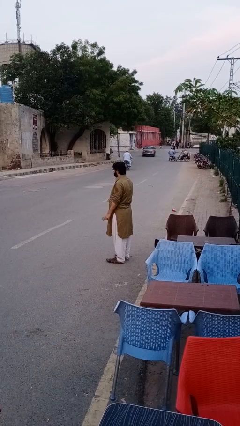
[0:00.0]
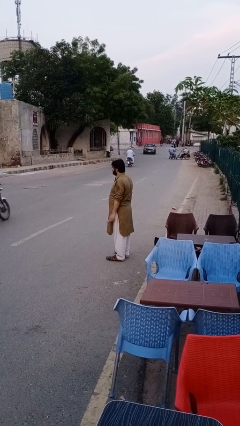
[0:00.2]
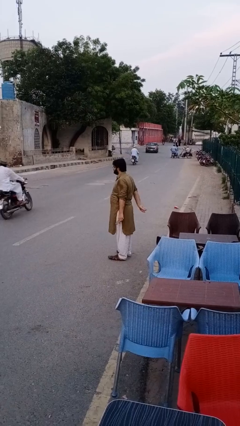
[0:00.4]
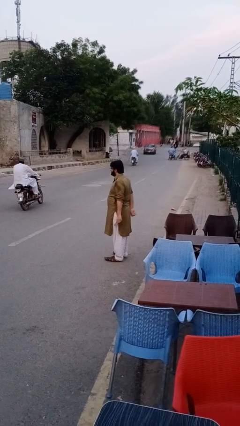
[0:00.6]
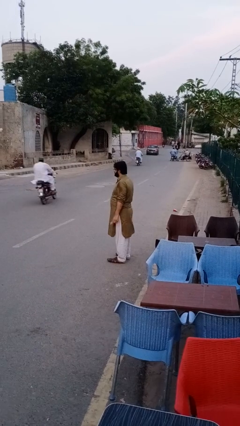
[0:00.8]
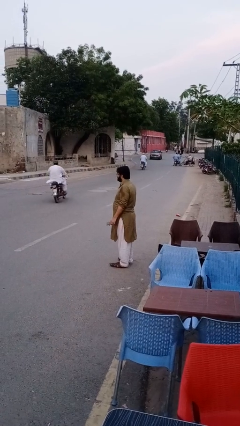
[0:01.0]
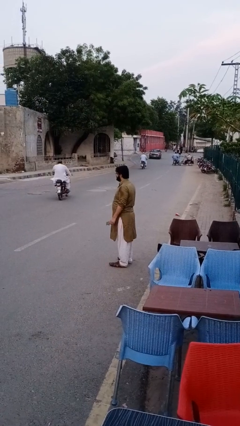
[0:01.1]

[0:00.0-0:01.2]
person puts phone into pocket

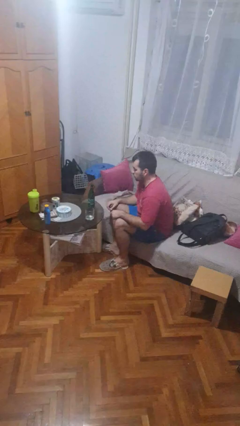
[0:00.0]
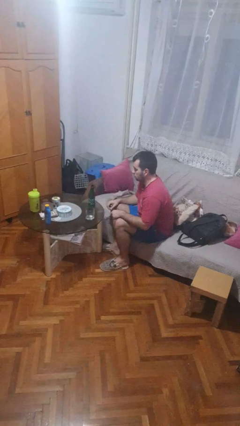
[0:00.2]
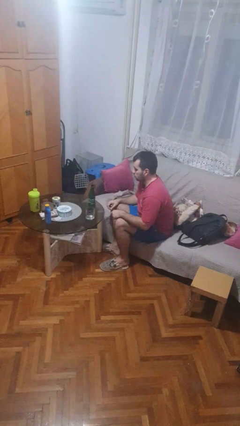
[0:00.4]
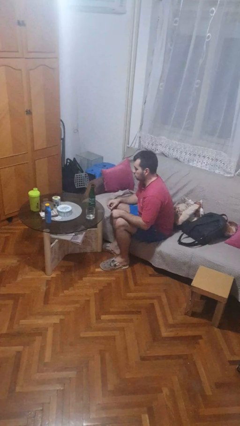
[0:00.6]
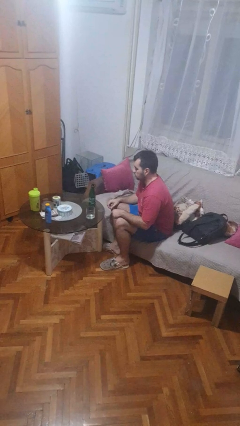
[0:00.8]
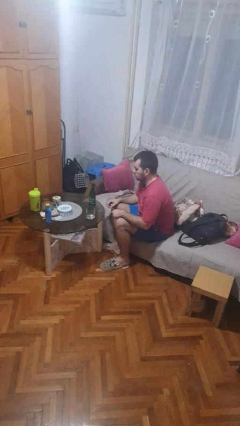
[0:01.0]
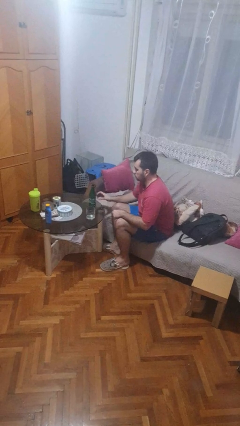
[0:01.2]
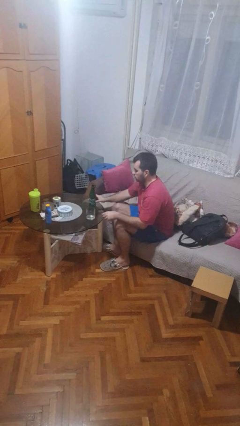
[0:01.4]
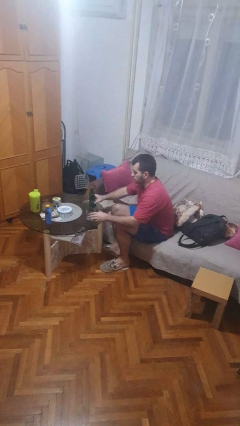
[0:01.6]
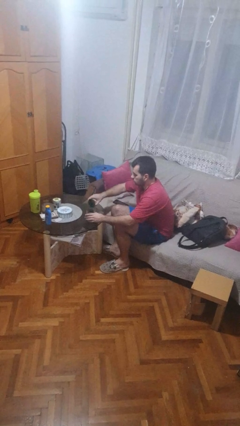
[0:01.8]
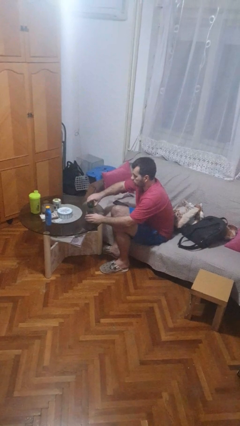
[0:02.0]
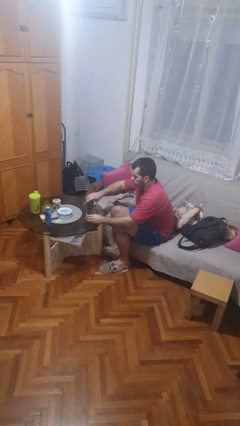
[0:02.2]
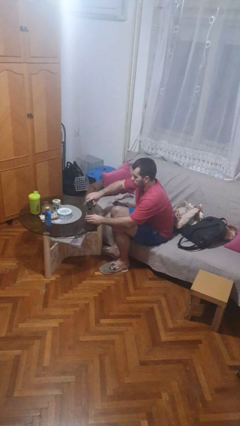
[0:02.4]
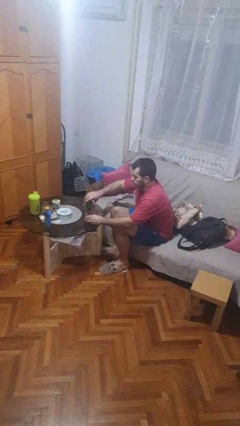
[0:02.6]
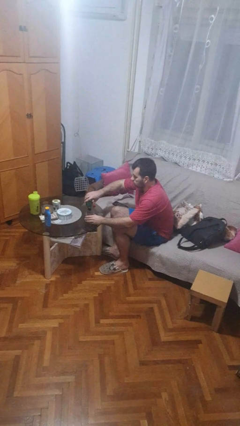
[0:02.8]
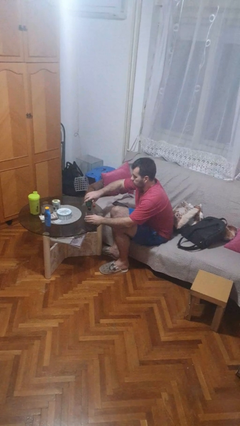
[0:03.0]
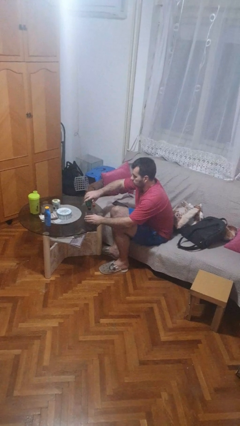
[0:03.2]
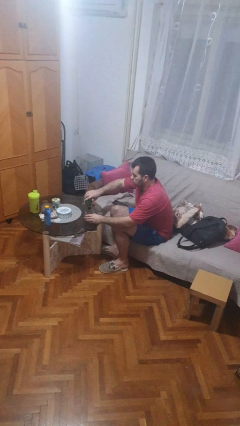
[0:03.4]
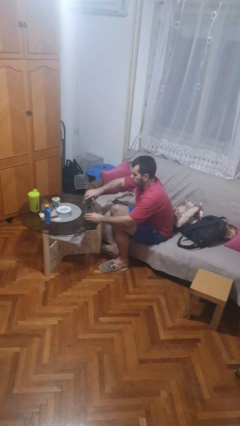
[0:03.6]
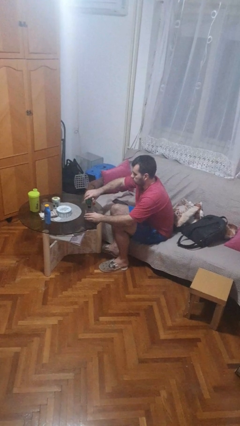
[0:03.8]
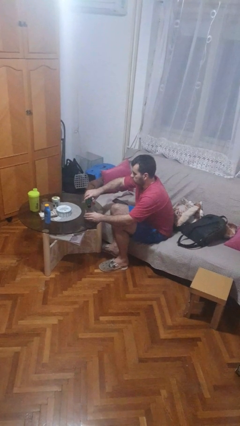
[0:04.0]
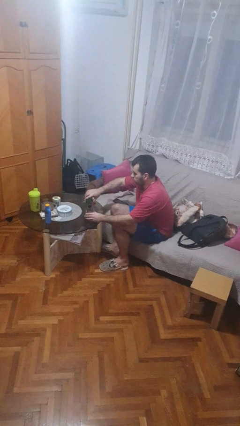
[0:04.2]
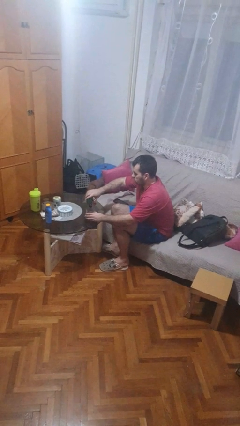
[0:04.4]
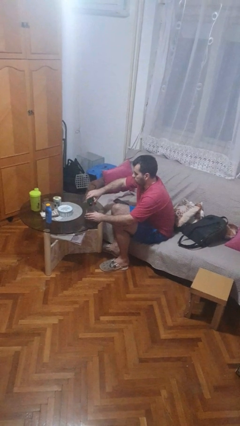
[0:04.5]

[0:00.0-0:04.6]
person pours liquid into cup

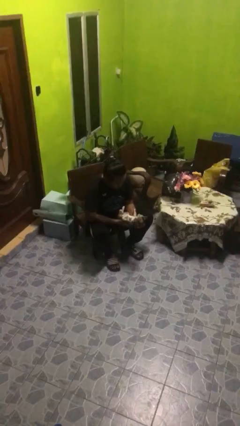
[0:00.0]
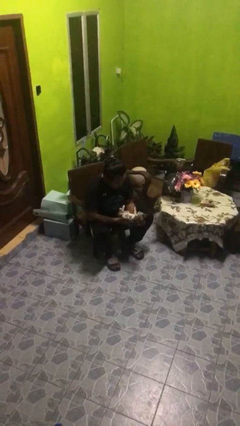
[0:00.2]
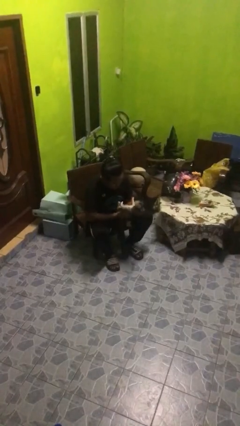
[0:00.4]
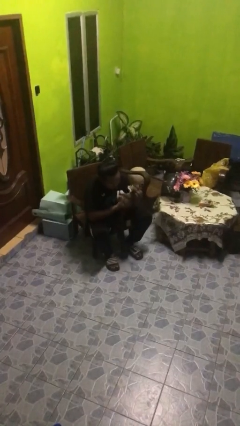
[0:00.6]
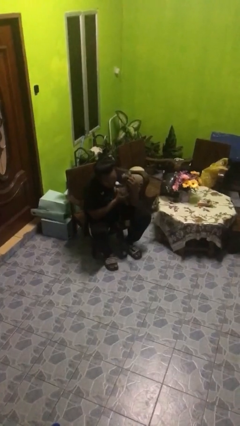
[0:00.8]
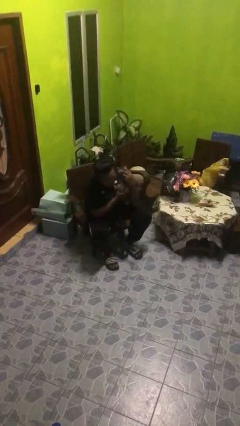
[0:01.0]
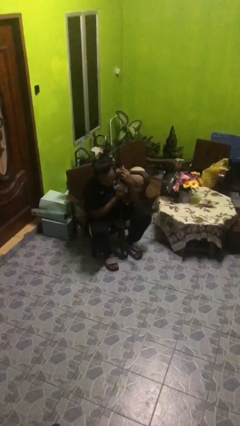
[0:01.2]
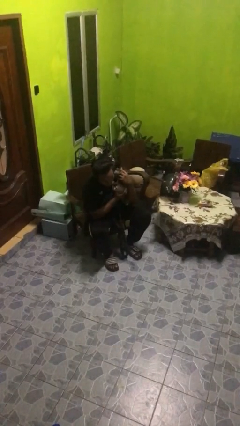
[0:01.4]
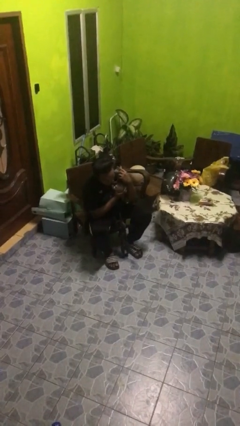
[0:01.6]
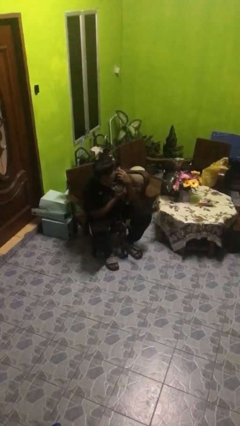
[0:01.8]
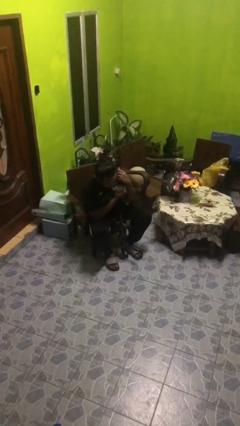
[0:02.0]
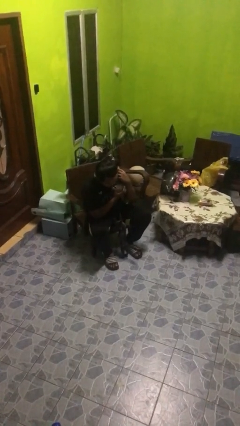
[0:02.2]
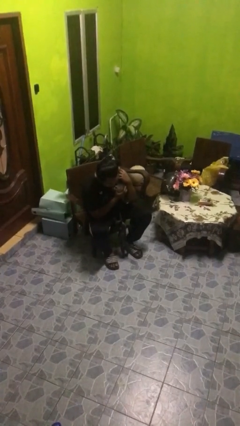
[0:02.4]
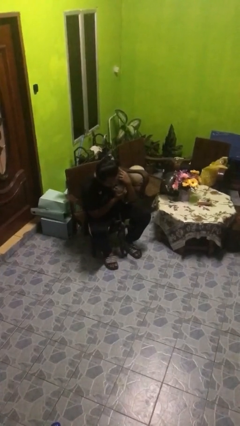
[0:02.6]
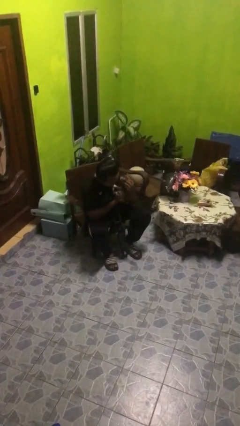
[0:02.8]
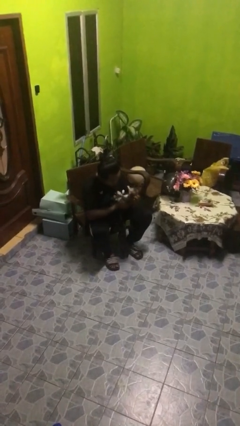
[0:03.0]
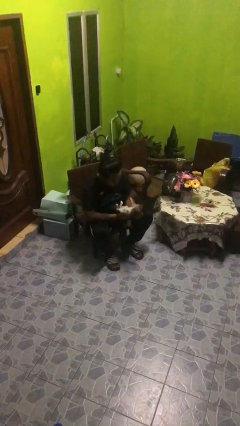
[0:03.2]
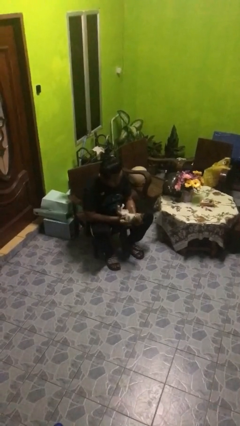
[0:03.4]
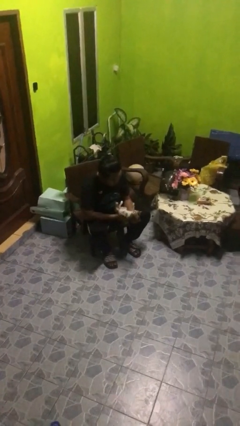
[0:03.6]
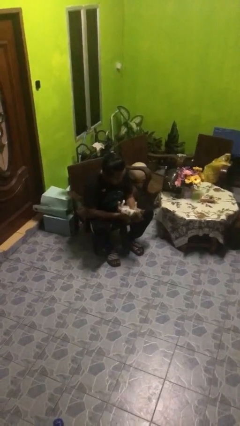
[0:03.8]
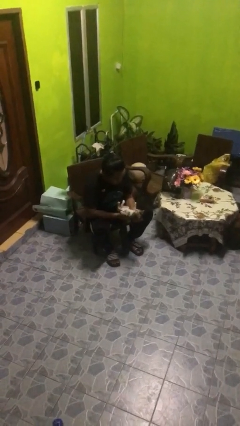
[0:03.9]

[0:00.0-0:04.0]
person hugs cat

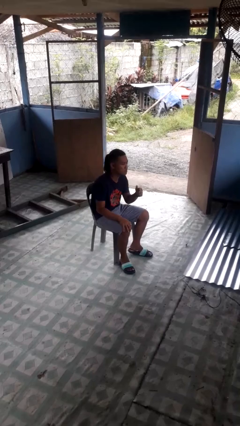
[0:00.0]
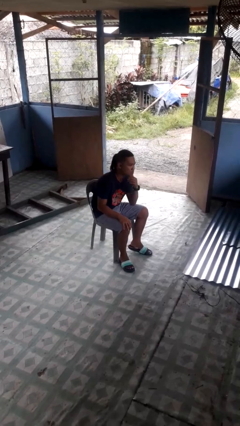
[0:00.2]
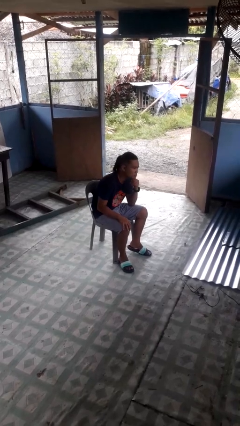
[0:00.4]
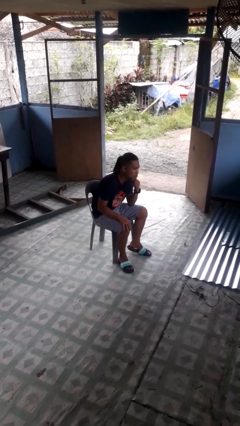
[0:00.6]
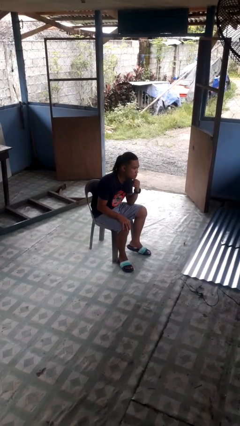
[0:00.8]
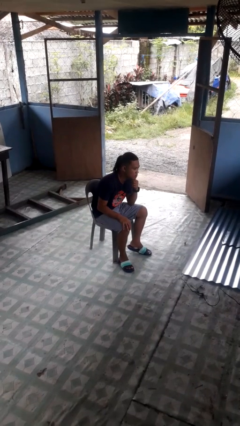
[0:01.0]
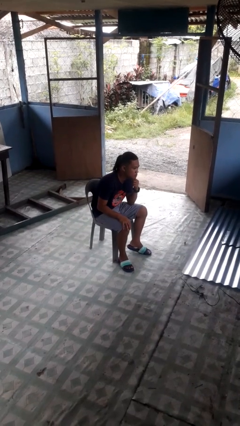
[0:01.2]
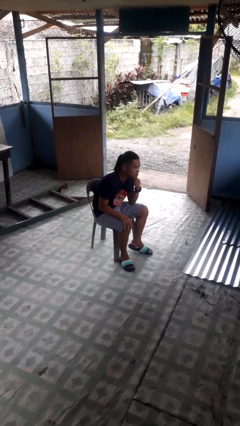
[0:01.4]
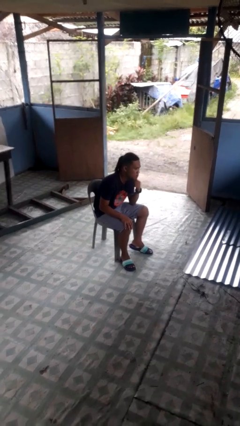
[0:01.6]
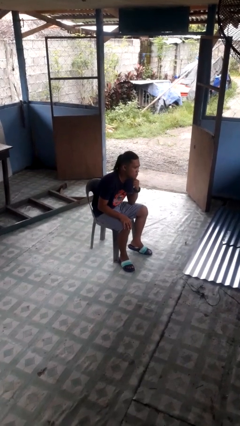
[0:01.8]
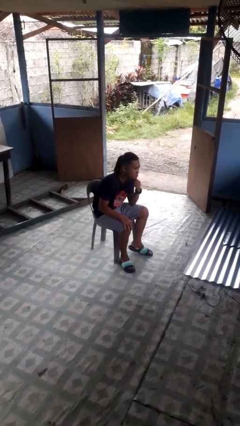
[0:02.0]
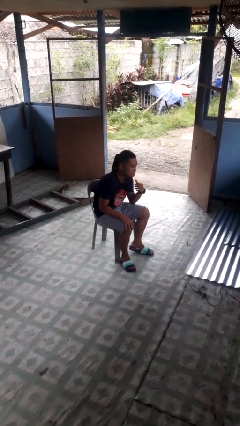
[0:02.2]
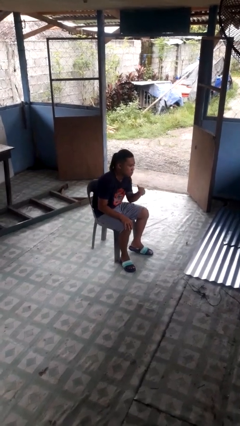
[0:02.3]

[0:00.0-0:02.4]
person strokes chin

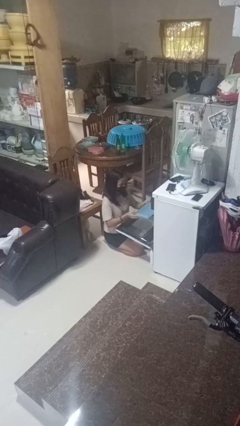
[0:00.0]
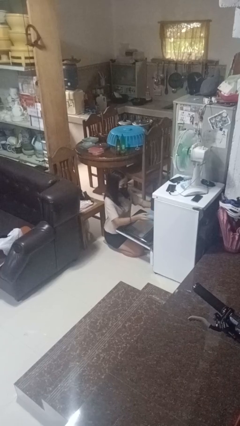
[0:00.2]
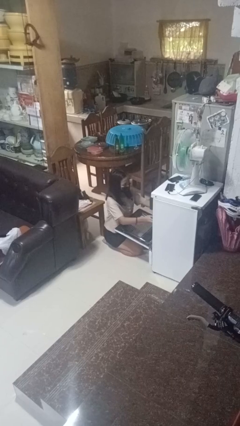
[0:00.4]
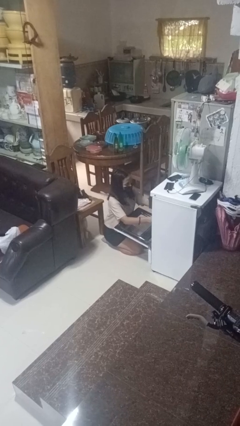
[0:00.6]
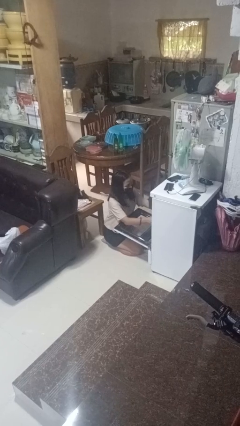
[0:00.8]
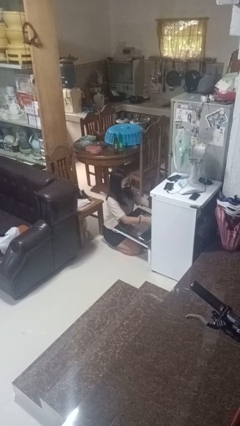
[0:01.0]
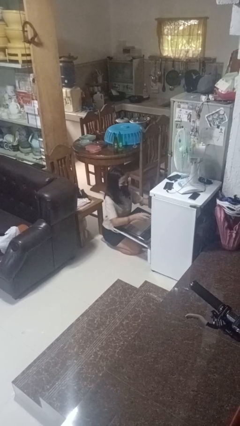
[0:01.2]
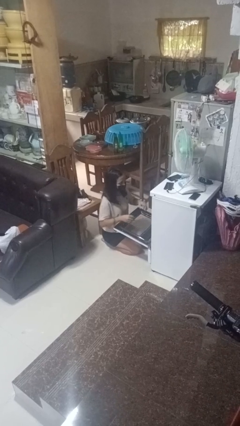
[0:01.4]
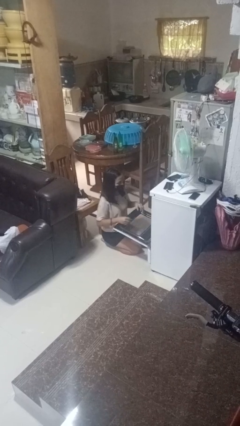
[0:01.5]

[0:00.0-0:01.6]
person puts object into oven

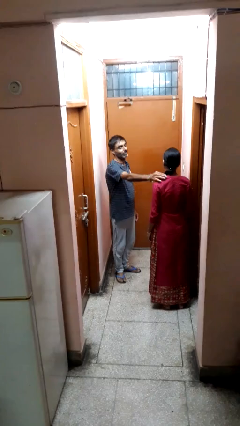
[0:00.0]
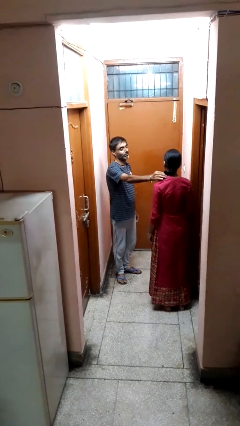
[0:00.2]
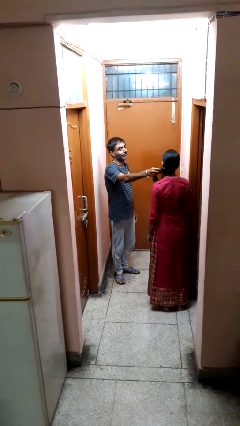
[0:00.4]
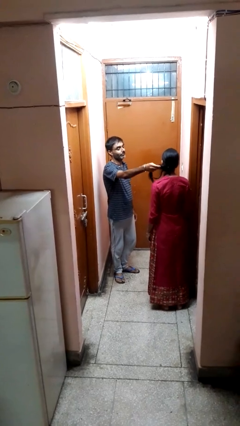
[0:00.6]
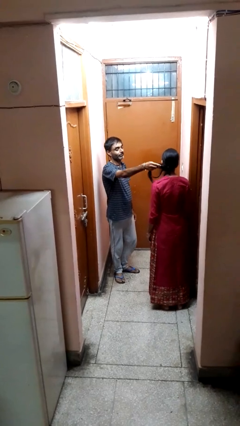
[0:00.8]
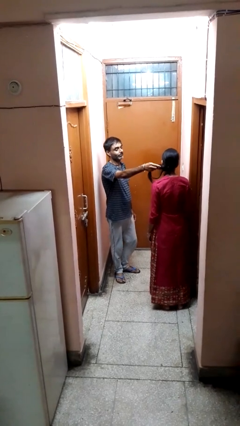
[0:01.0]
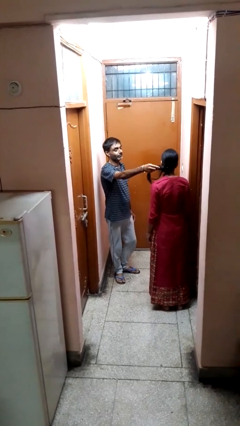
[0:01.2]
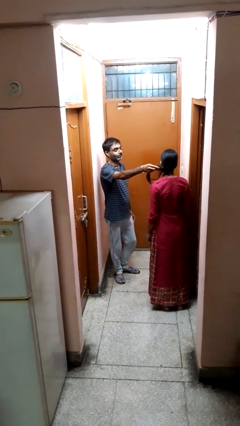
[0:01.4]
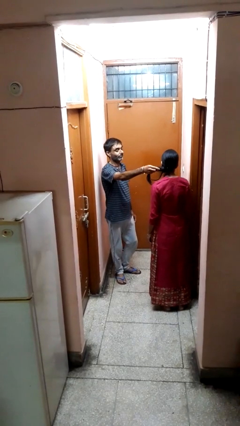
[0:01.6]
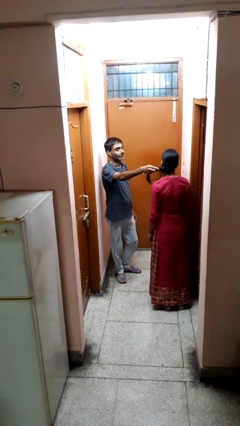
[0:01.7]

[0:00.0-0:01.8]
person grabs person by hair

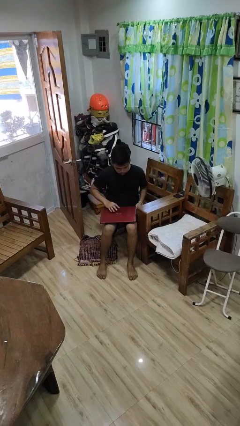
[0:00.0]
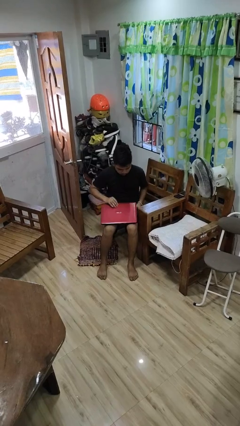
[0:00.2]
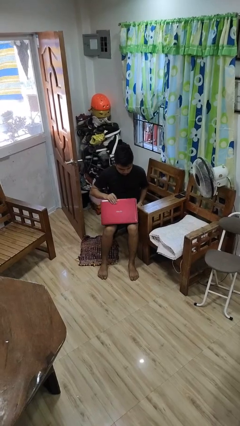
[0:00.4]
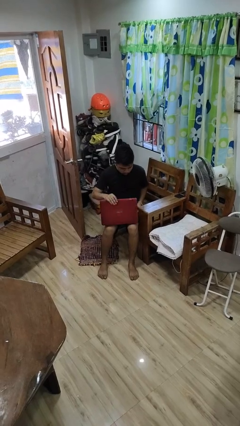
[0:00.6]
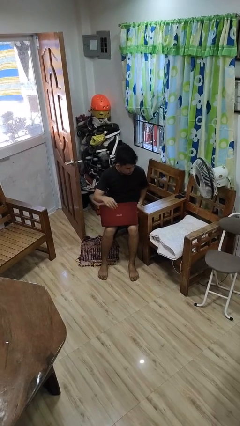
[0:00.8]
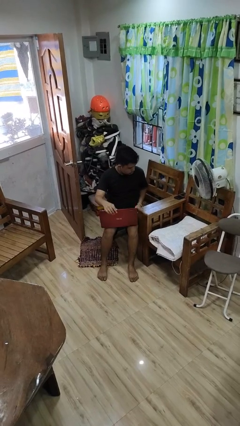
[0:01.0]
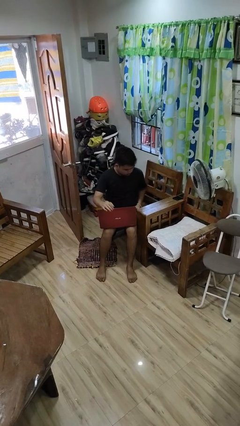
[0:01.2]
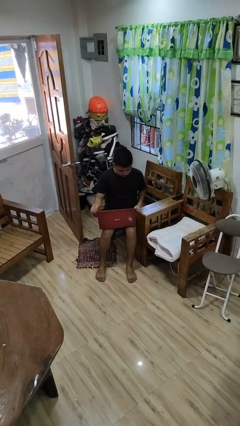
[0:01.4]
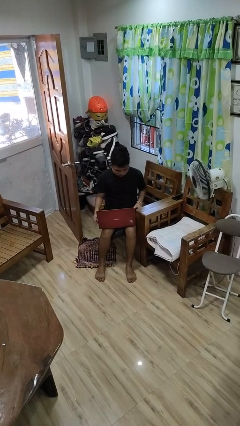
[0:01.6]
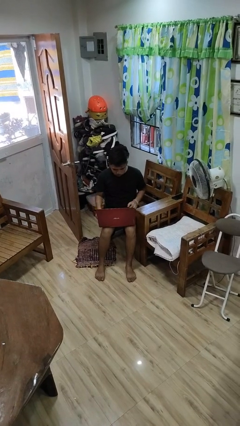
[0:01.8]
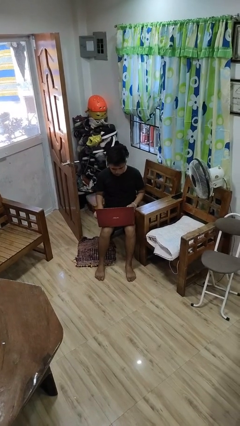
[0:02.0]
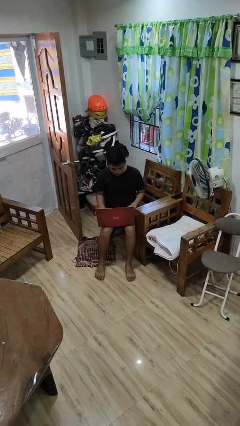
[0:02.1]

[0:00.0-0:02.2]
person opens laptop
